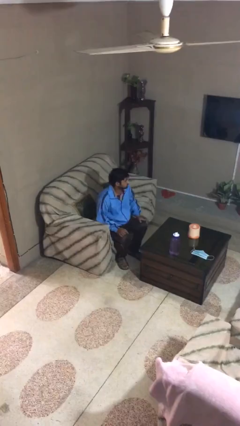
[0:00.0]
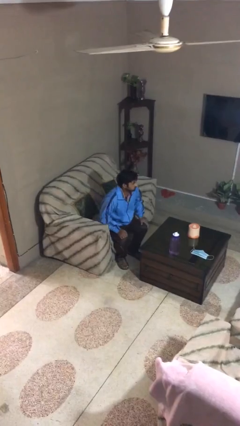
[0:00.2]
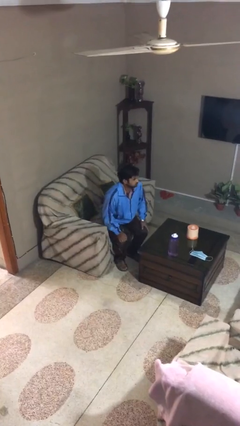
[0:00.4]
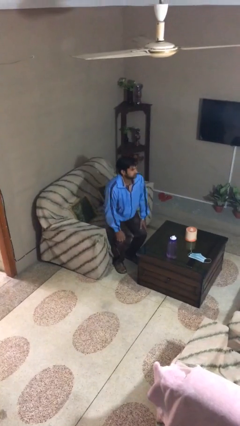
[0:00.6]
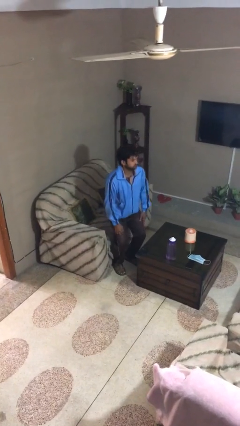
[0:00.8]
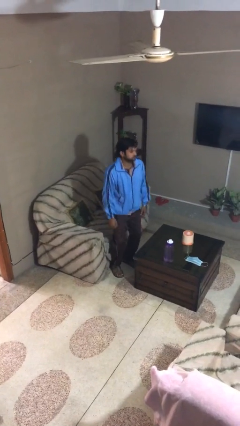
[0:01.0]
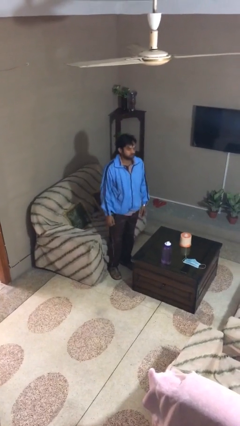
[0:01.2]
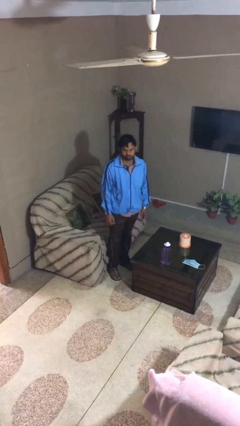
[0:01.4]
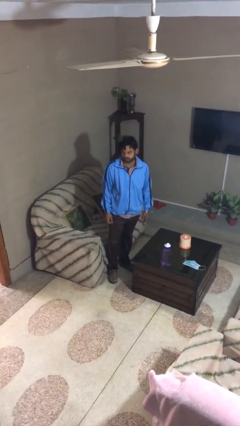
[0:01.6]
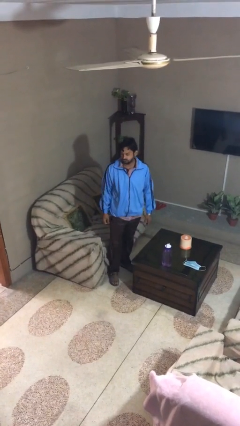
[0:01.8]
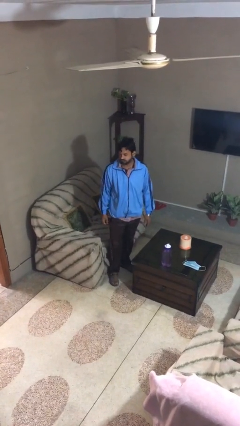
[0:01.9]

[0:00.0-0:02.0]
person stands up

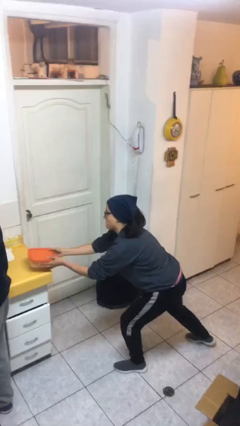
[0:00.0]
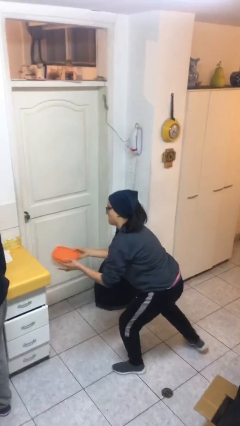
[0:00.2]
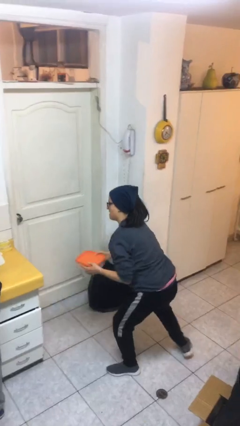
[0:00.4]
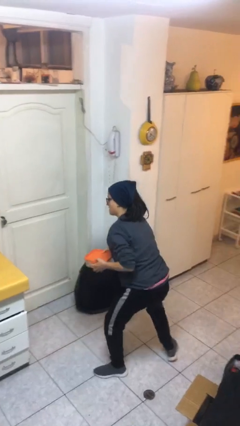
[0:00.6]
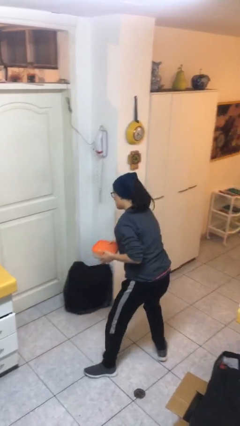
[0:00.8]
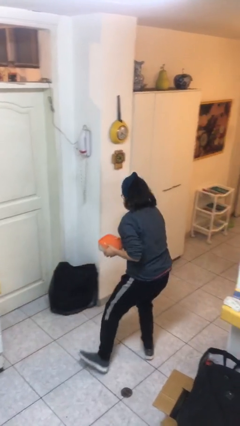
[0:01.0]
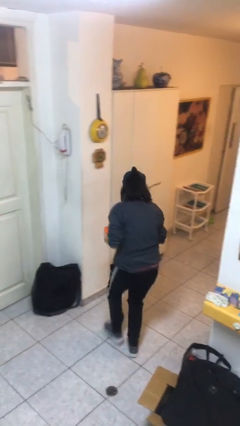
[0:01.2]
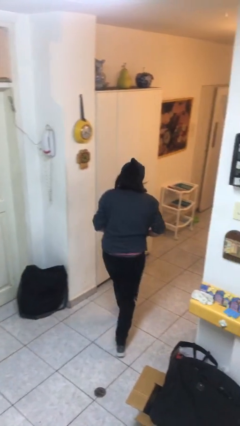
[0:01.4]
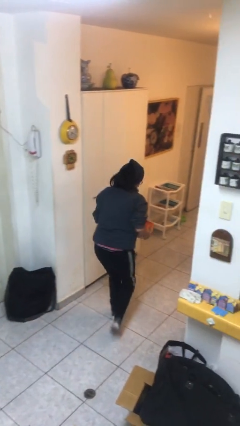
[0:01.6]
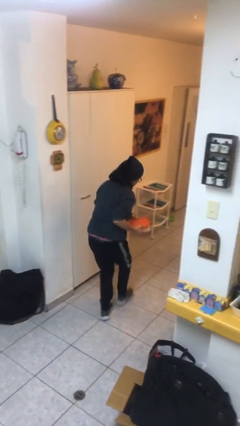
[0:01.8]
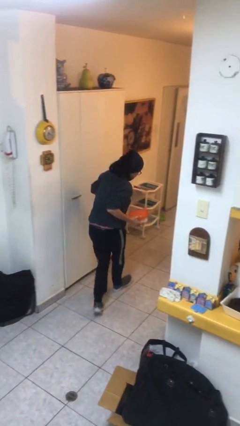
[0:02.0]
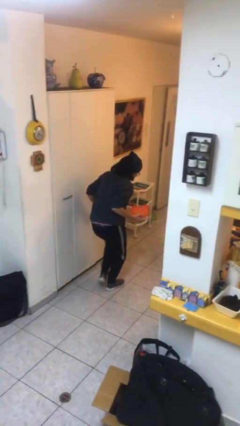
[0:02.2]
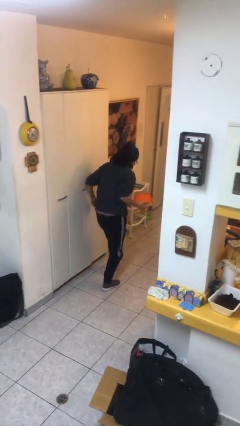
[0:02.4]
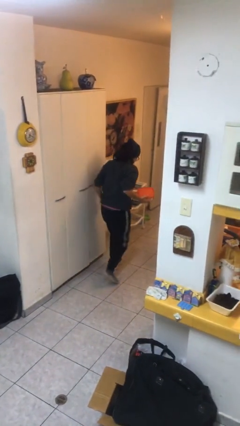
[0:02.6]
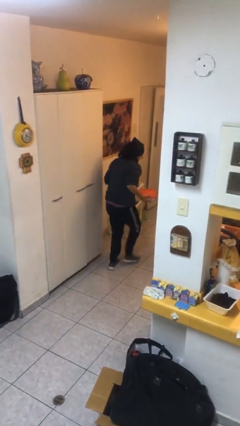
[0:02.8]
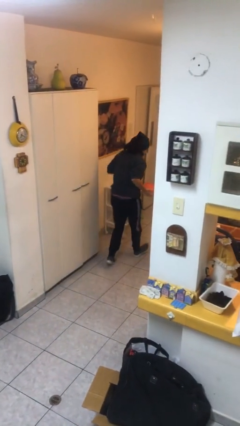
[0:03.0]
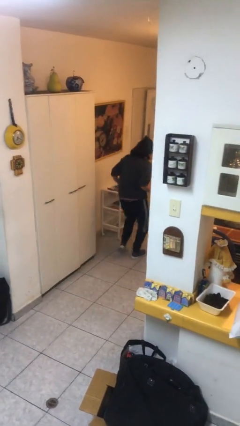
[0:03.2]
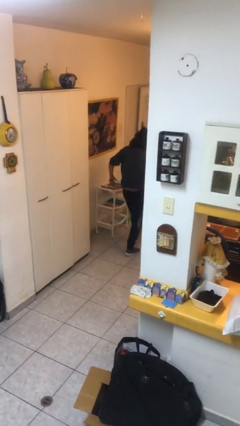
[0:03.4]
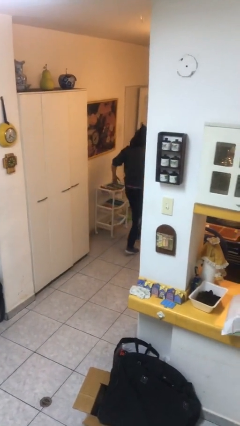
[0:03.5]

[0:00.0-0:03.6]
person steals object from person

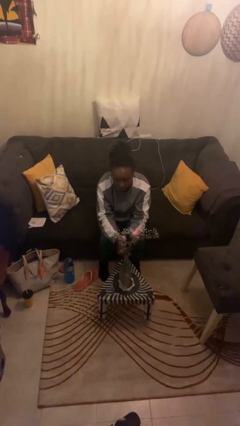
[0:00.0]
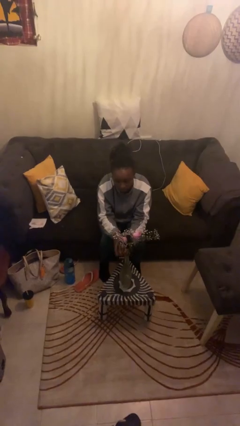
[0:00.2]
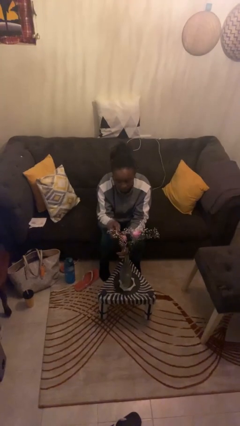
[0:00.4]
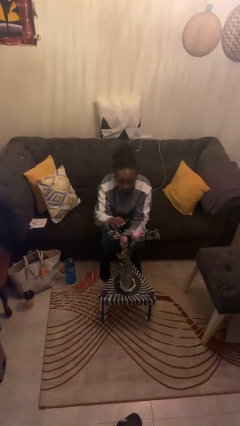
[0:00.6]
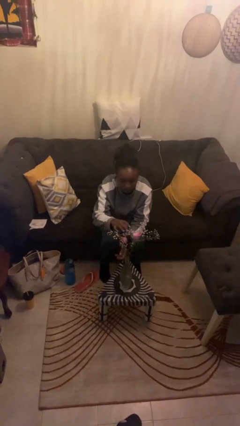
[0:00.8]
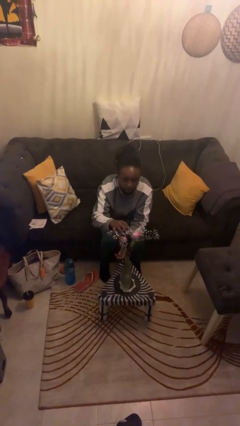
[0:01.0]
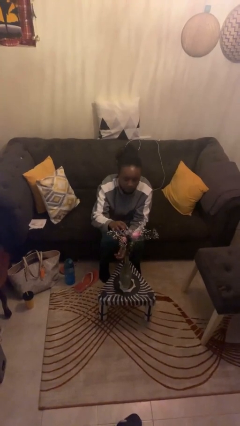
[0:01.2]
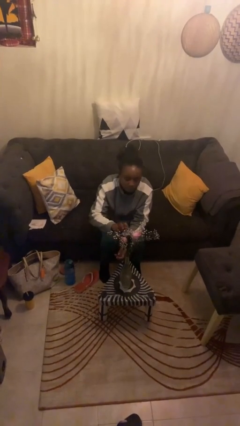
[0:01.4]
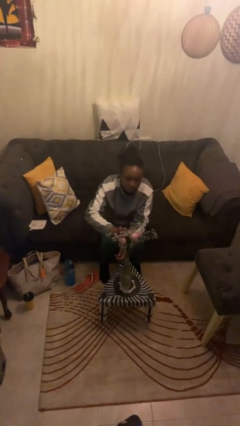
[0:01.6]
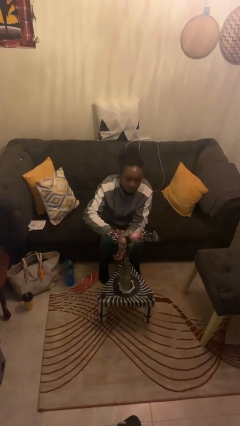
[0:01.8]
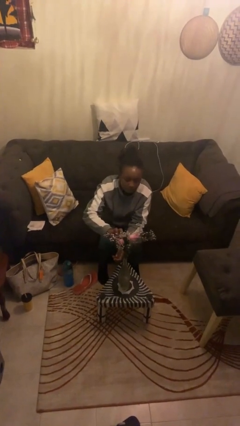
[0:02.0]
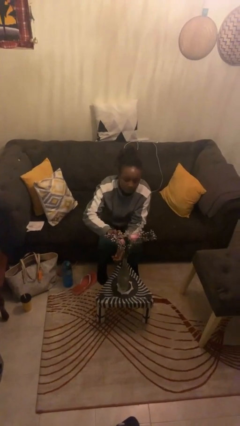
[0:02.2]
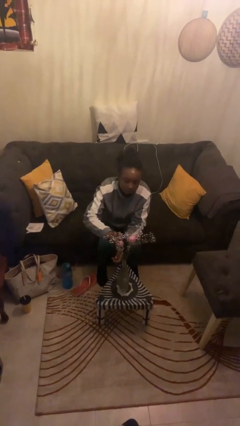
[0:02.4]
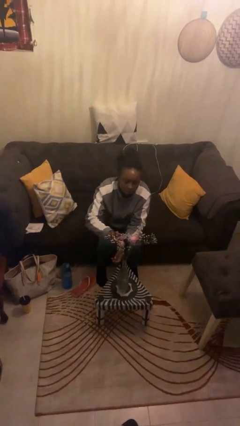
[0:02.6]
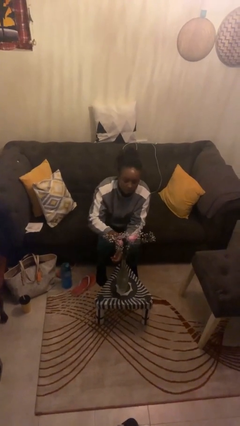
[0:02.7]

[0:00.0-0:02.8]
person arranges flowers in vase

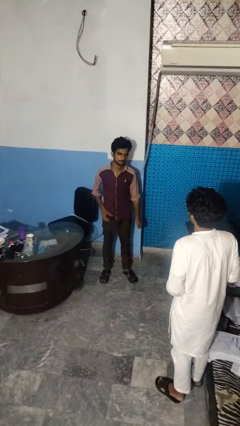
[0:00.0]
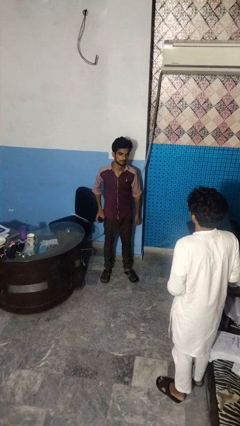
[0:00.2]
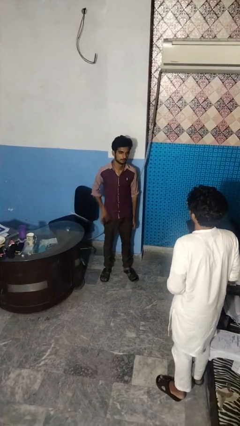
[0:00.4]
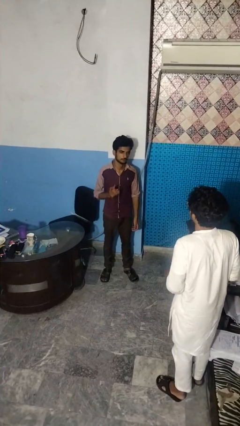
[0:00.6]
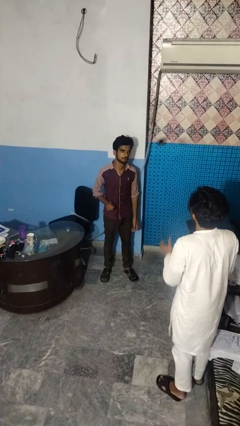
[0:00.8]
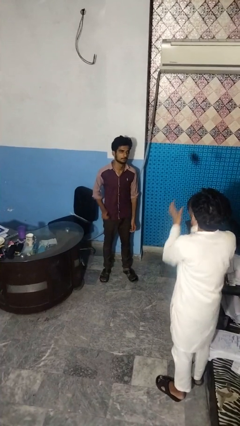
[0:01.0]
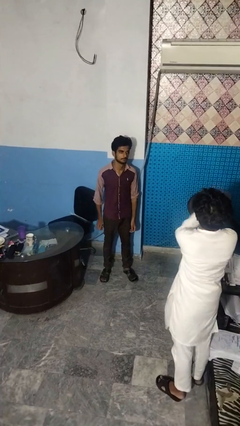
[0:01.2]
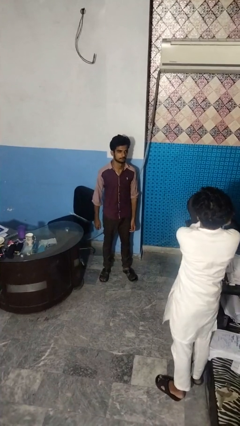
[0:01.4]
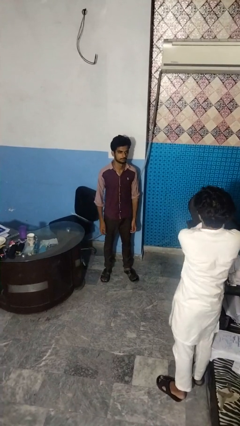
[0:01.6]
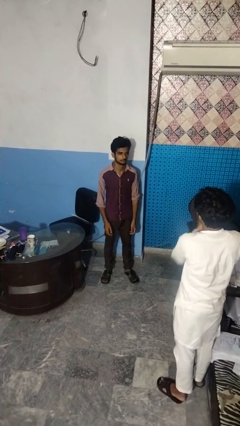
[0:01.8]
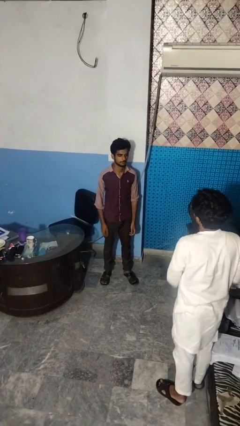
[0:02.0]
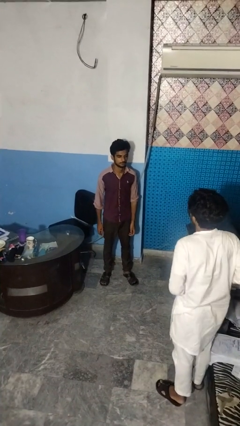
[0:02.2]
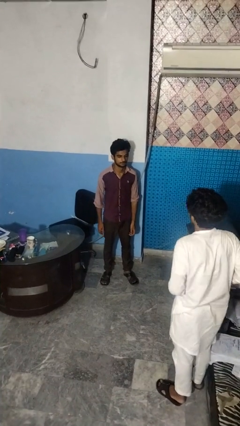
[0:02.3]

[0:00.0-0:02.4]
person throws object to person

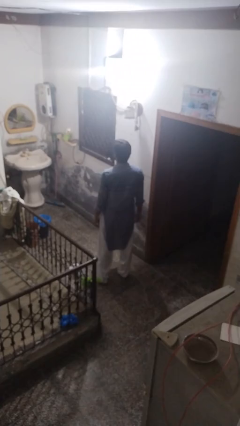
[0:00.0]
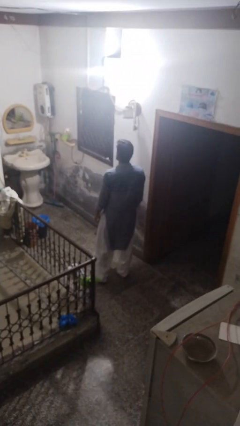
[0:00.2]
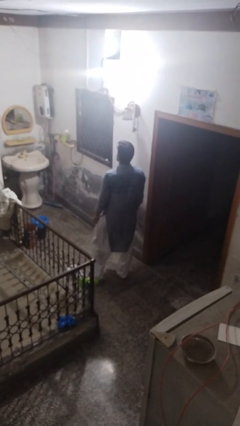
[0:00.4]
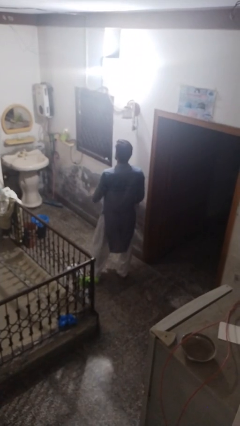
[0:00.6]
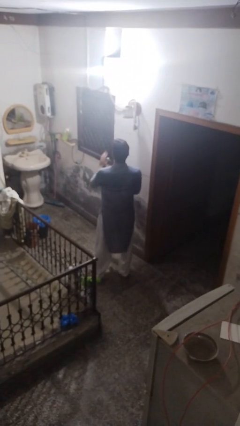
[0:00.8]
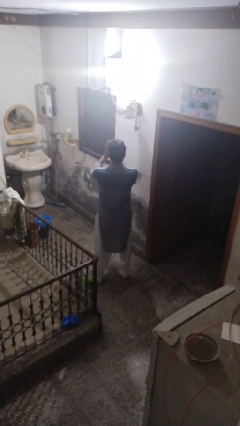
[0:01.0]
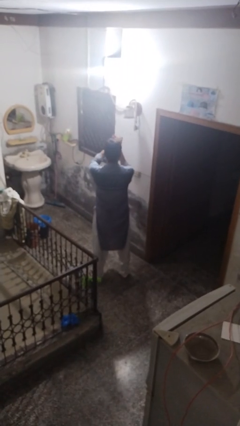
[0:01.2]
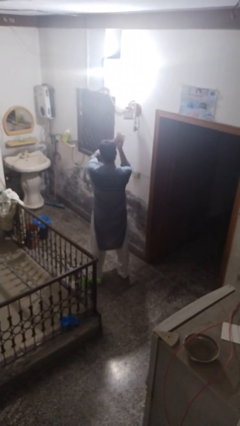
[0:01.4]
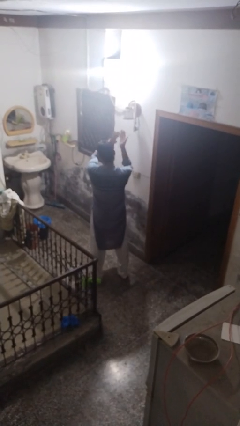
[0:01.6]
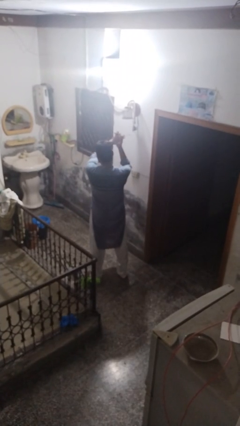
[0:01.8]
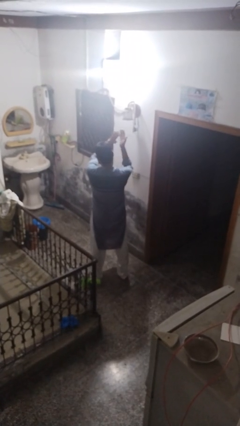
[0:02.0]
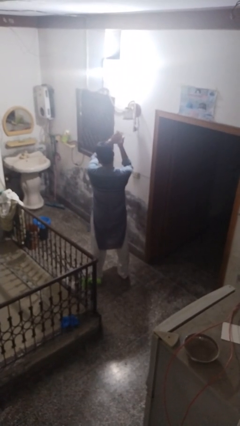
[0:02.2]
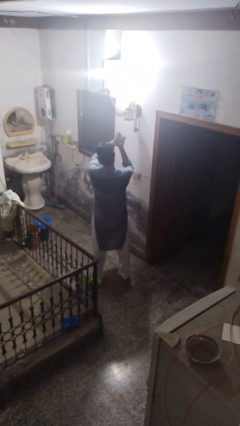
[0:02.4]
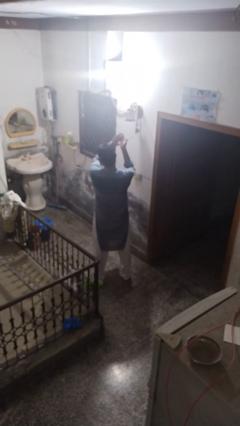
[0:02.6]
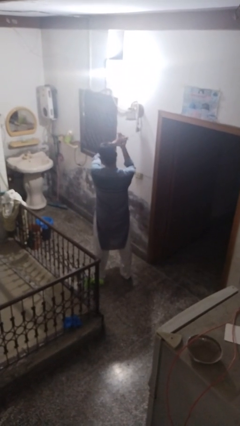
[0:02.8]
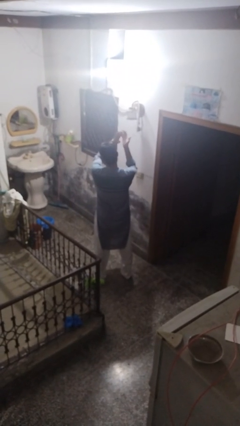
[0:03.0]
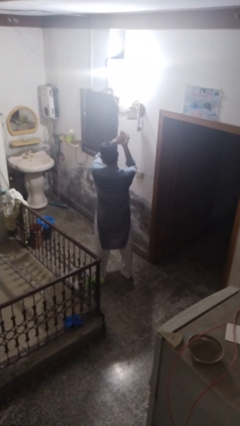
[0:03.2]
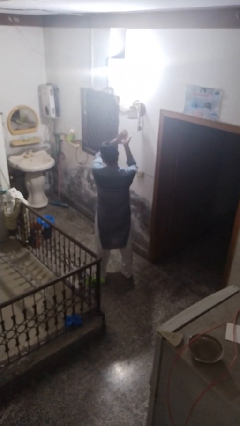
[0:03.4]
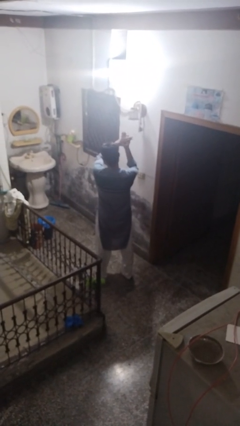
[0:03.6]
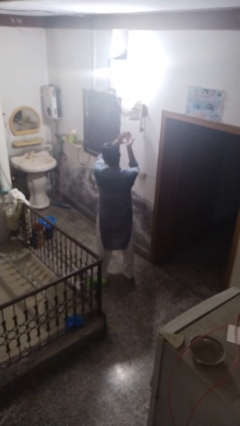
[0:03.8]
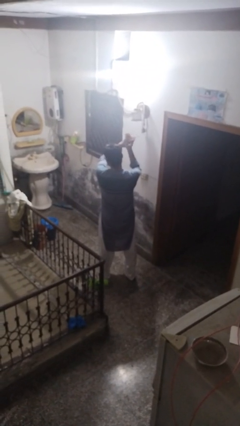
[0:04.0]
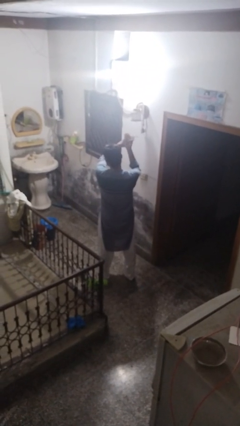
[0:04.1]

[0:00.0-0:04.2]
person claps hands

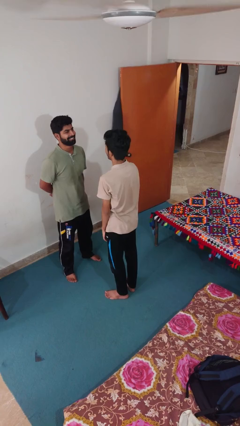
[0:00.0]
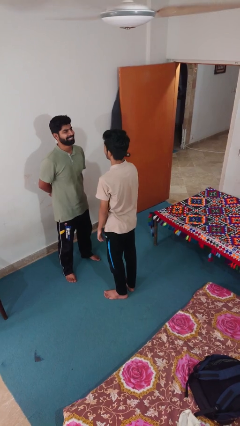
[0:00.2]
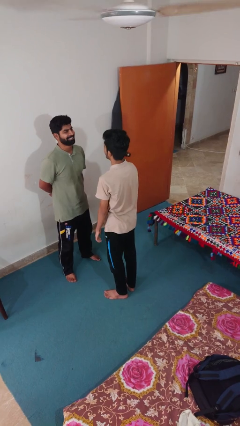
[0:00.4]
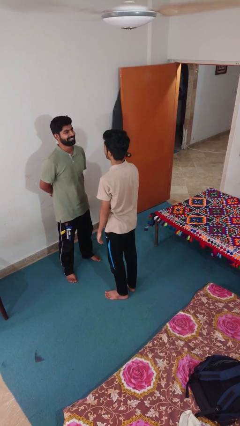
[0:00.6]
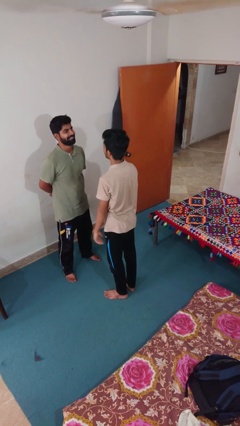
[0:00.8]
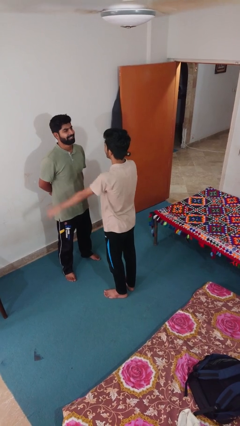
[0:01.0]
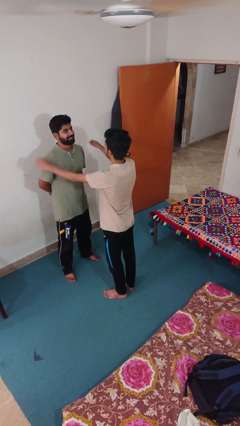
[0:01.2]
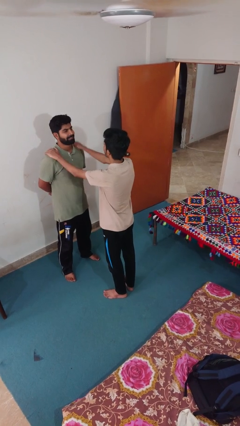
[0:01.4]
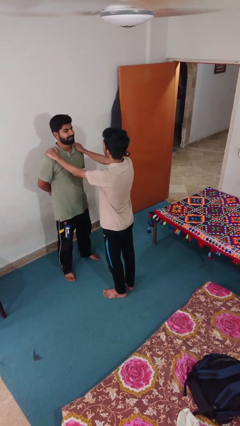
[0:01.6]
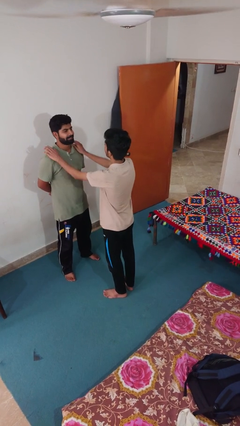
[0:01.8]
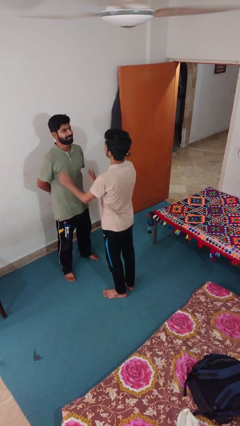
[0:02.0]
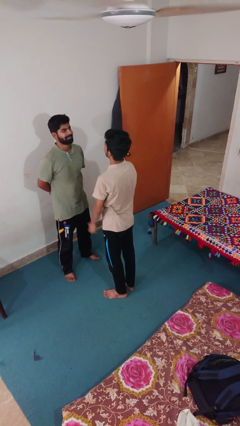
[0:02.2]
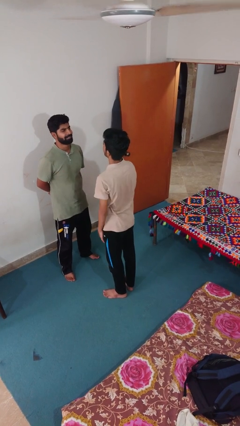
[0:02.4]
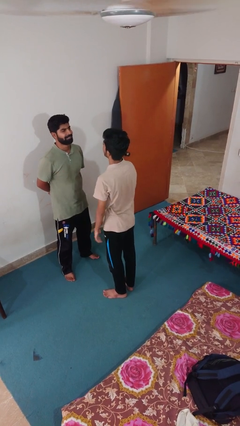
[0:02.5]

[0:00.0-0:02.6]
person pounds shoulders of person
